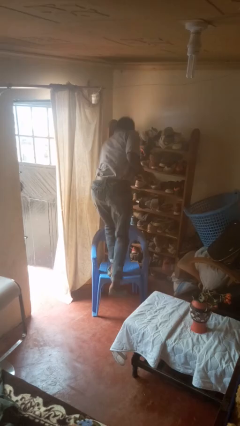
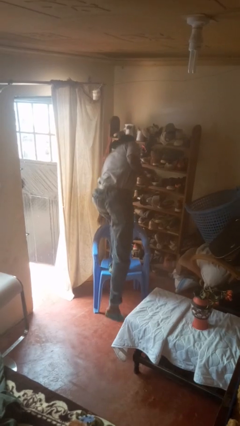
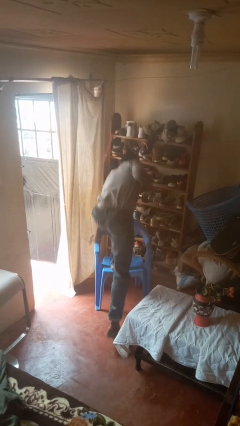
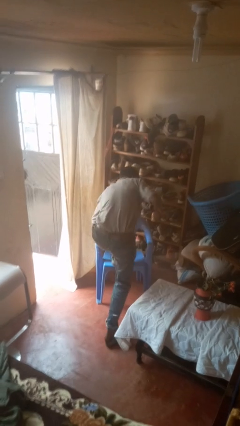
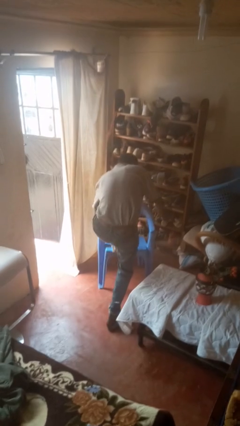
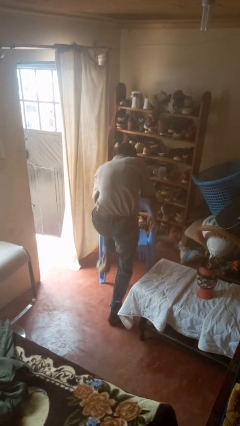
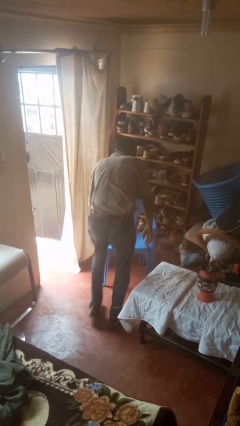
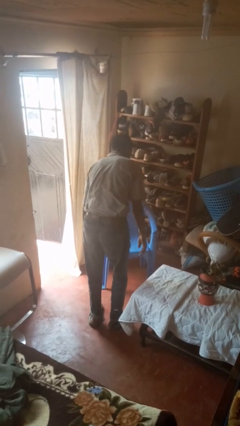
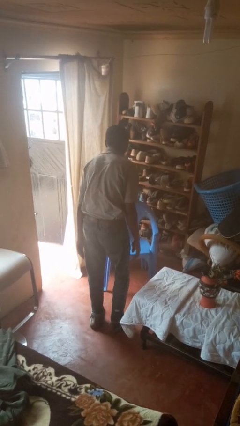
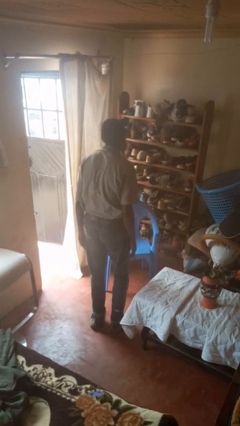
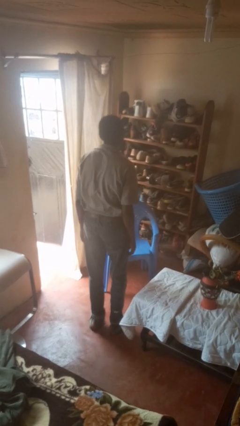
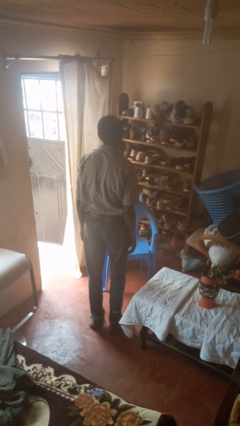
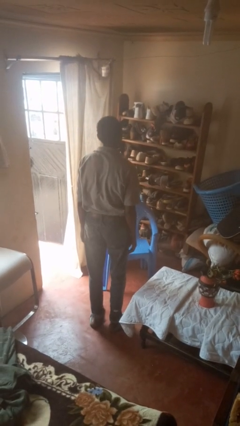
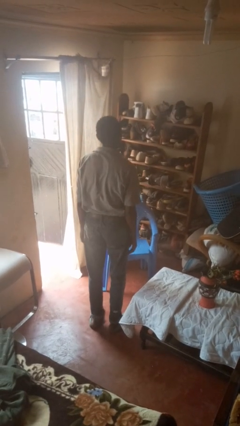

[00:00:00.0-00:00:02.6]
person climbs off chair

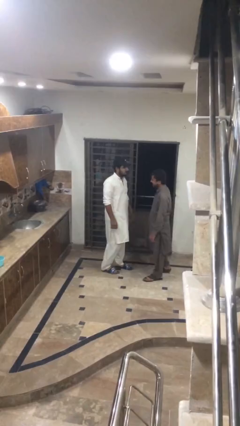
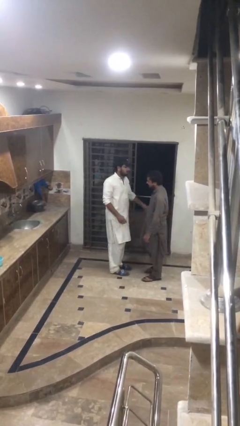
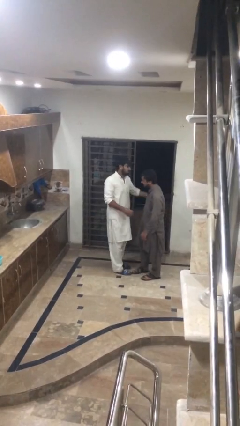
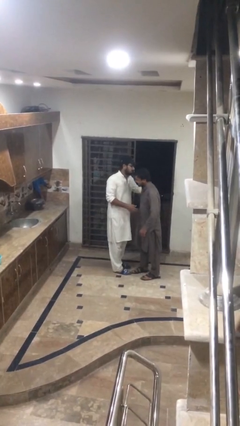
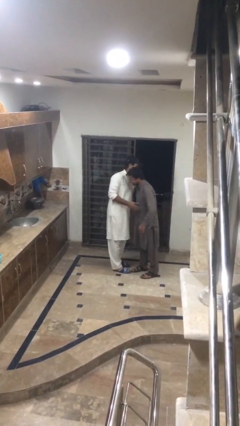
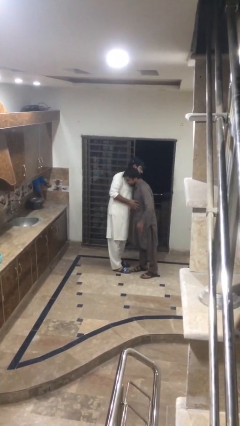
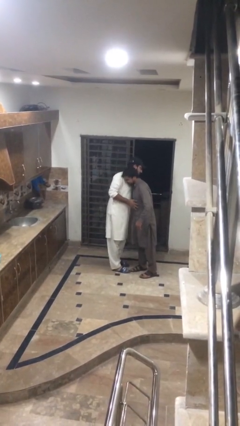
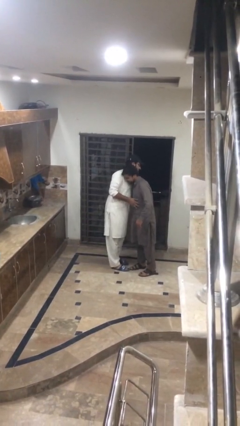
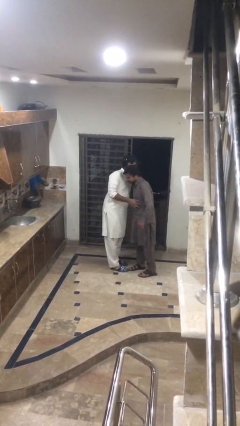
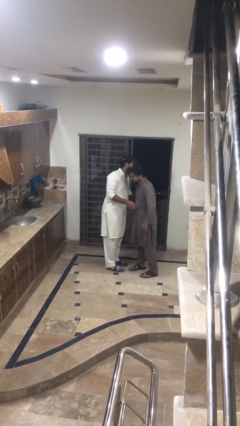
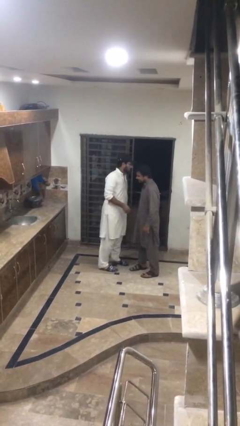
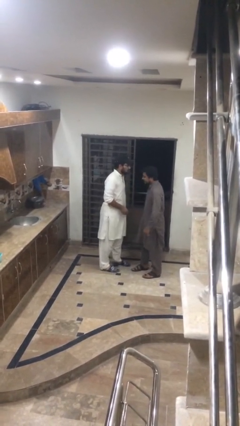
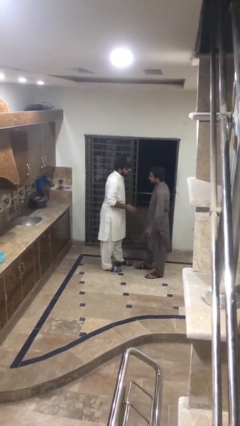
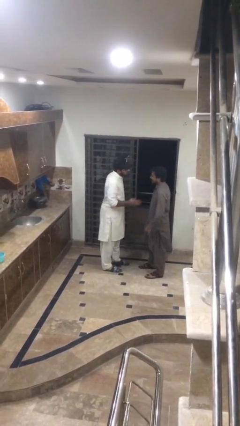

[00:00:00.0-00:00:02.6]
person embraces person

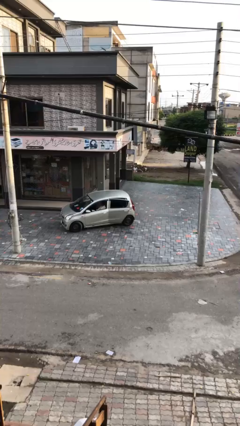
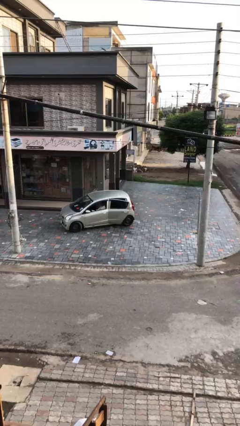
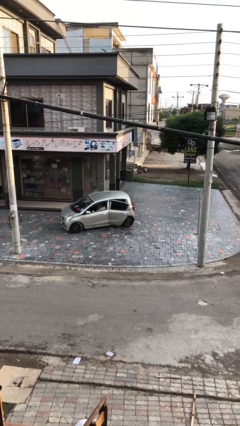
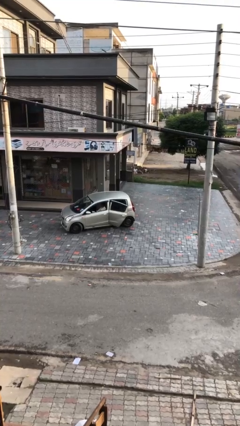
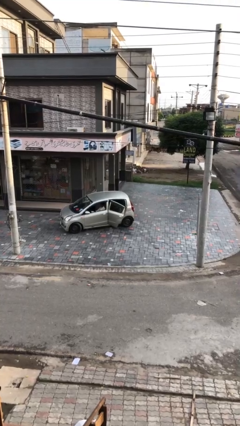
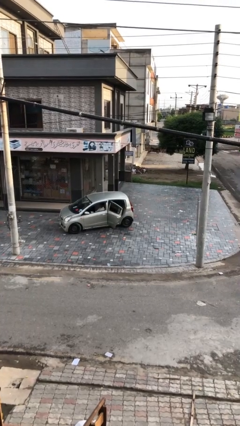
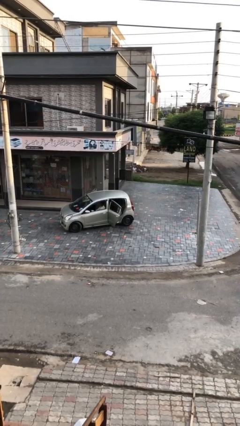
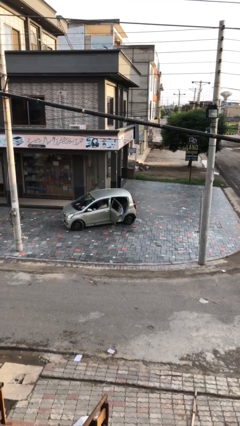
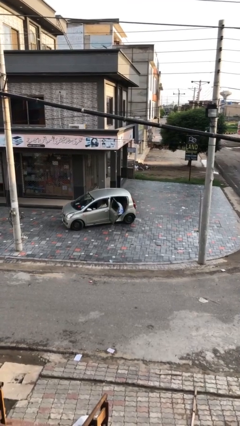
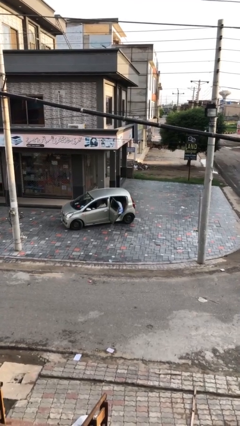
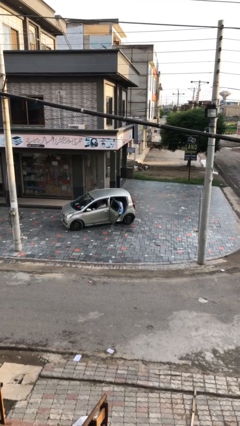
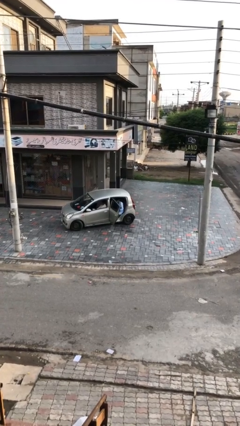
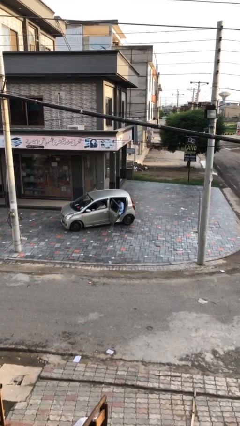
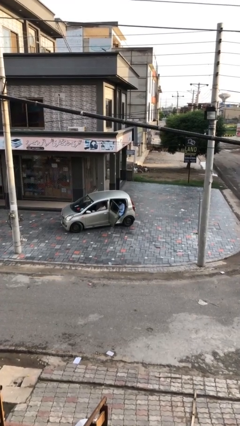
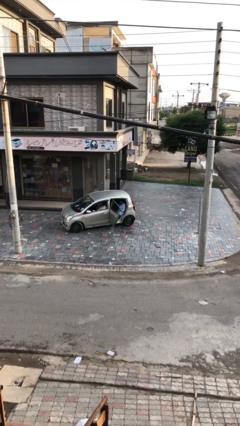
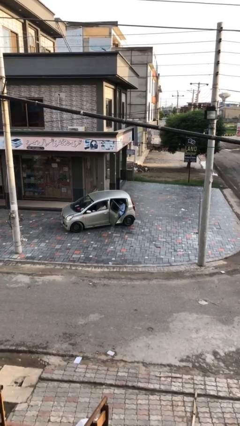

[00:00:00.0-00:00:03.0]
person opens car door

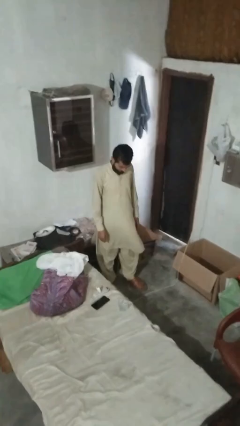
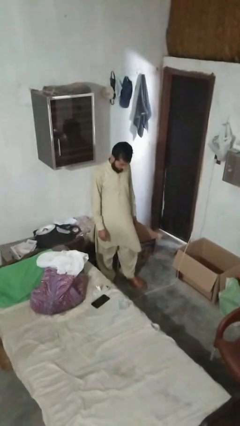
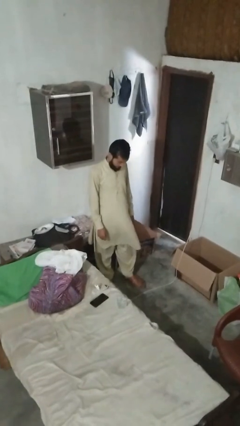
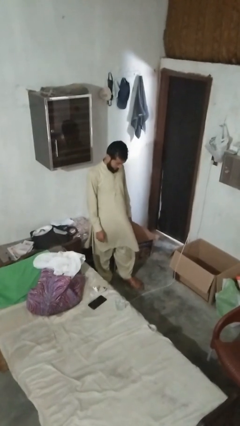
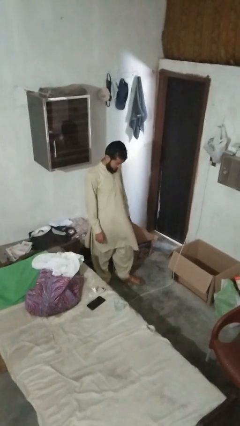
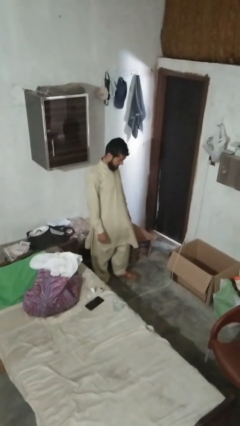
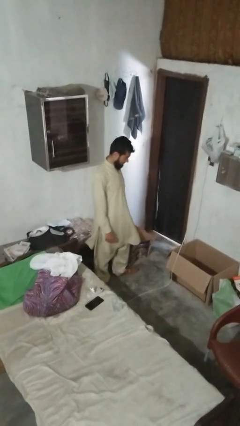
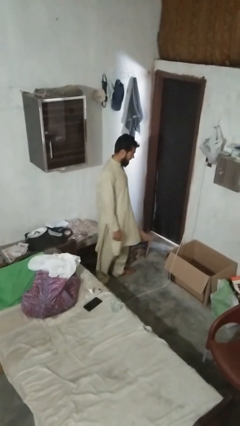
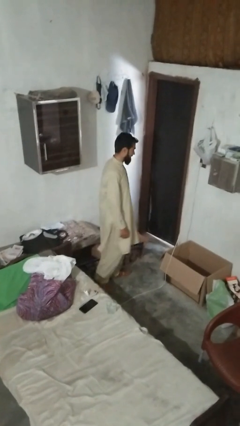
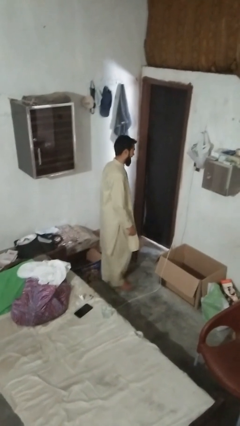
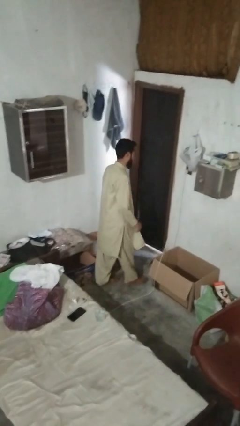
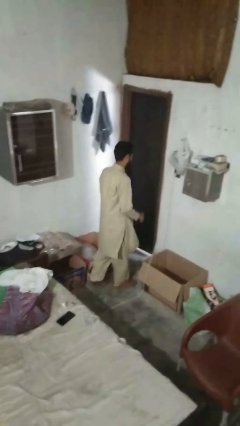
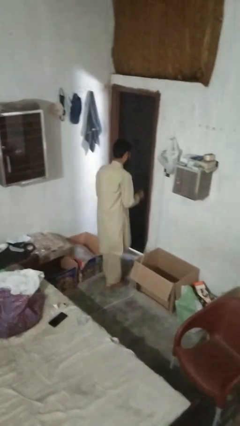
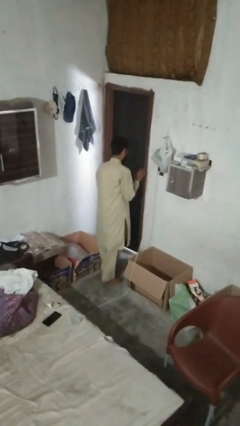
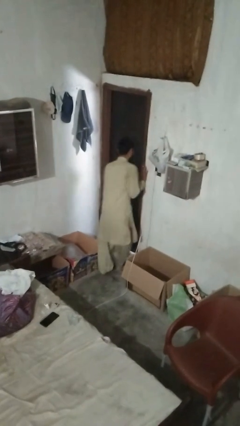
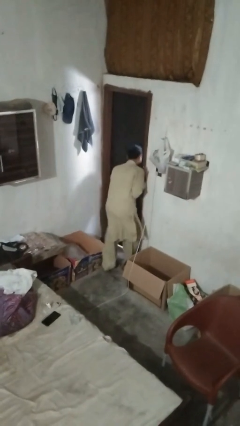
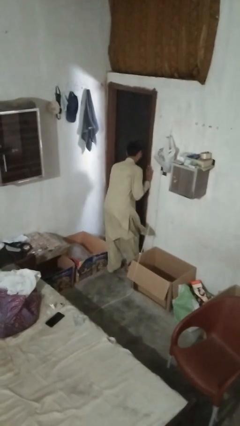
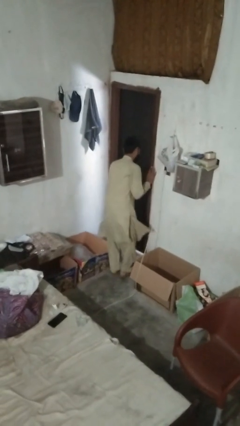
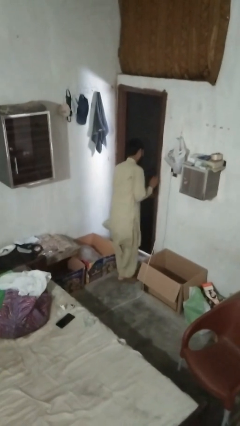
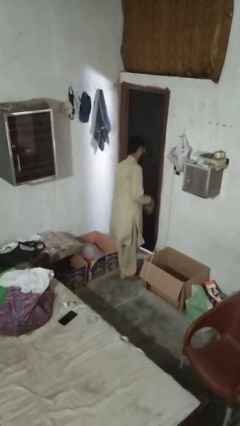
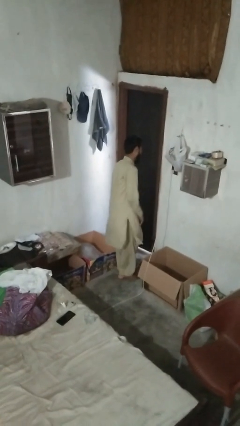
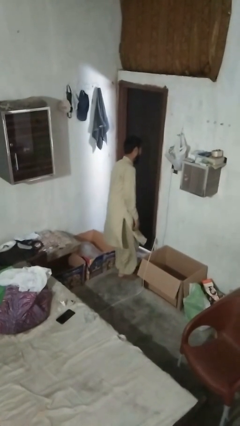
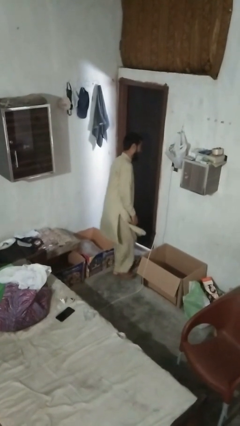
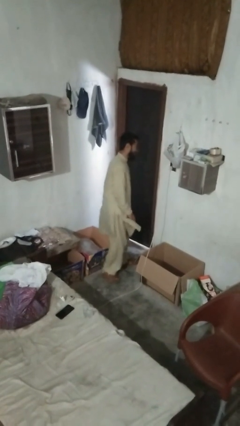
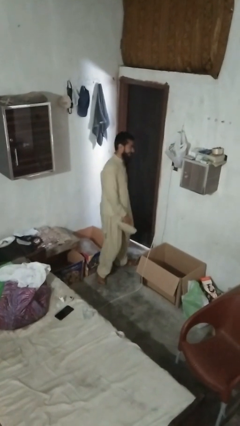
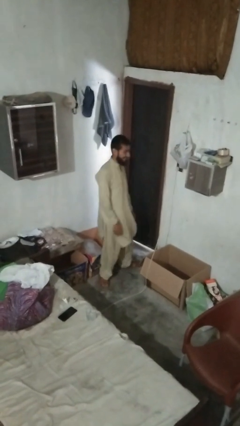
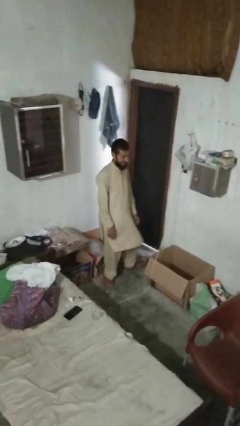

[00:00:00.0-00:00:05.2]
person bumps into wall

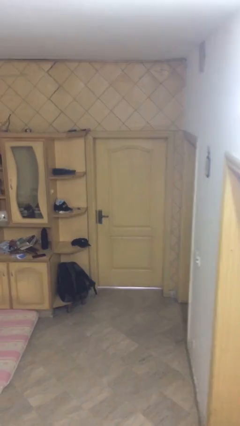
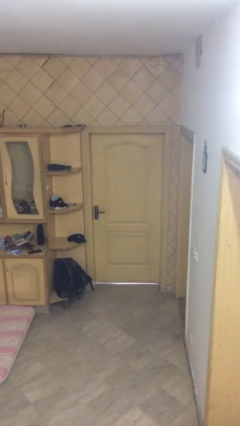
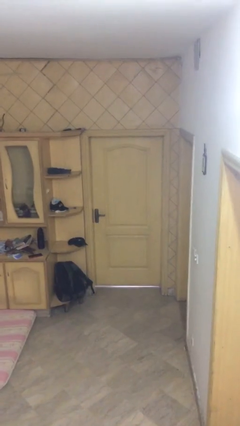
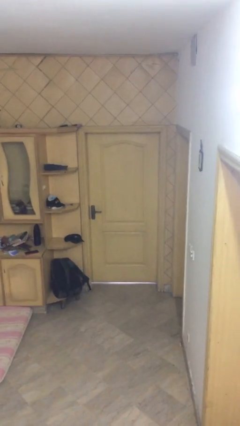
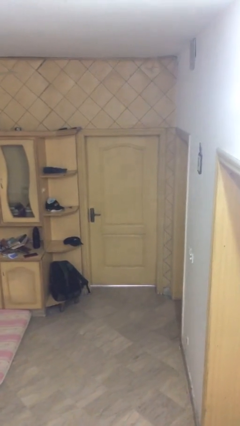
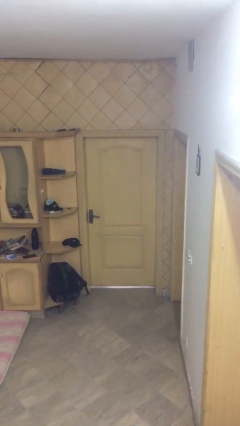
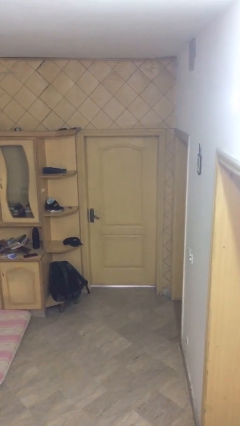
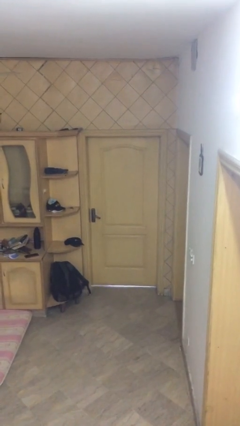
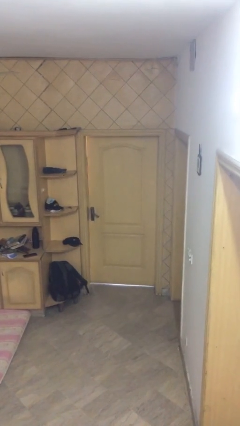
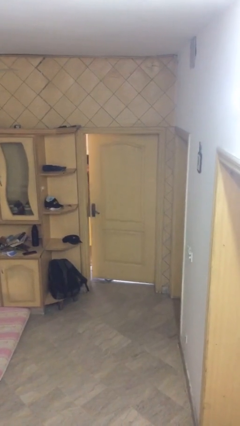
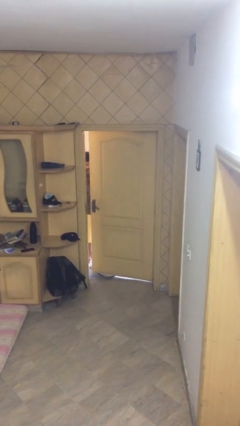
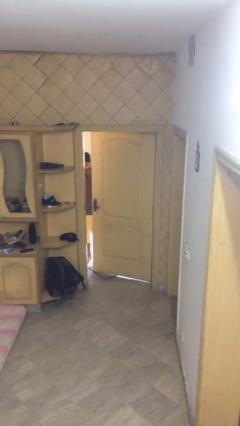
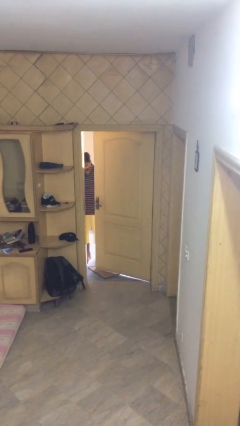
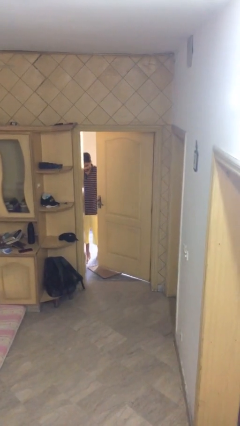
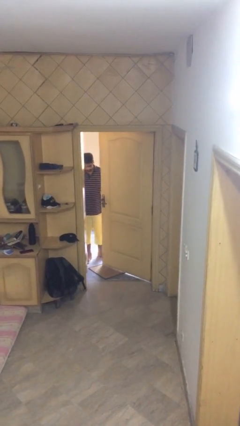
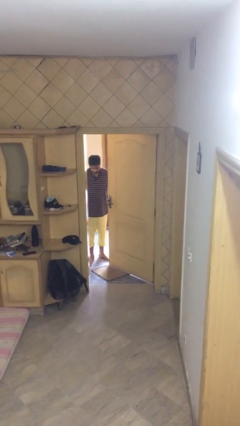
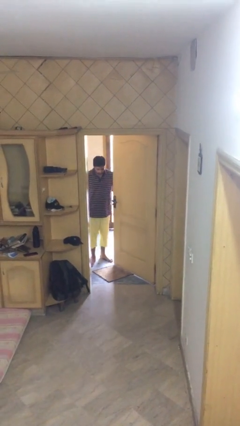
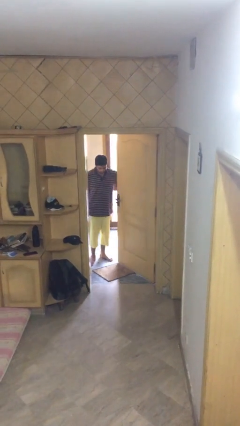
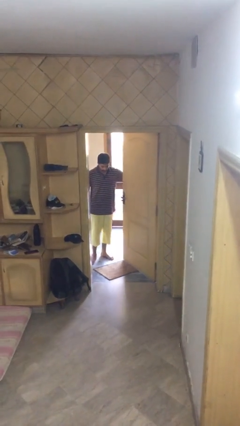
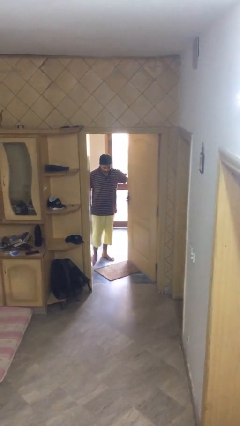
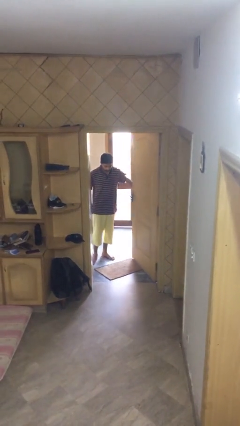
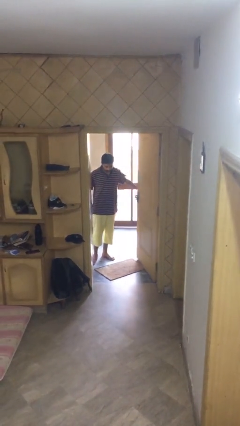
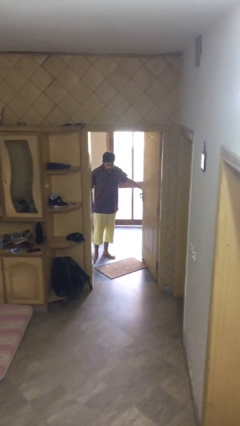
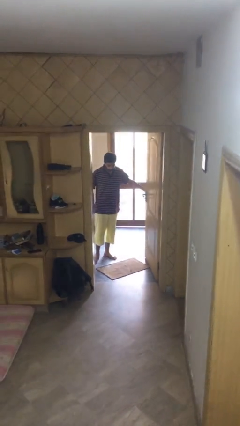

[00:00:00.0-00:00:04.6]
person opens facility door
